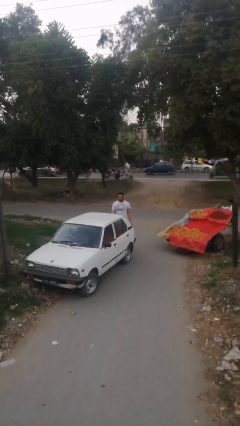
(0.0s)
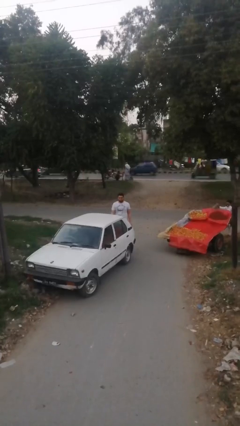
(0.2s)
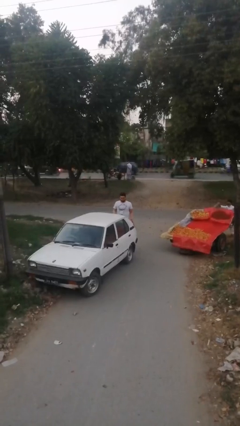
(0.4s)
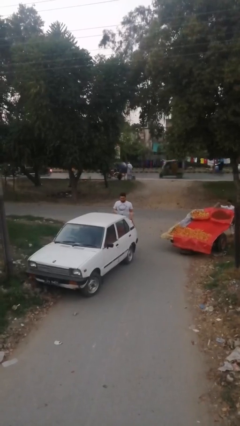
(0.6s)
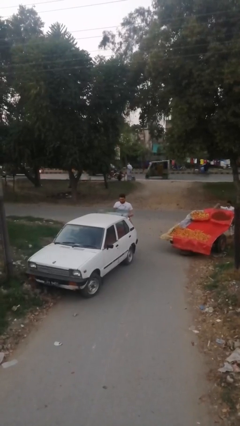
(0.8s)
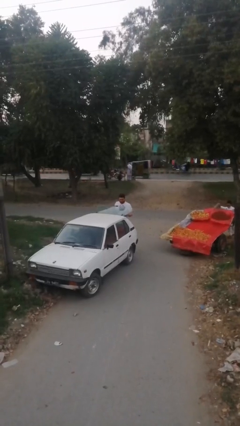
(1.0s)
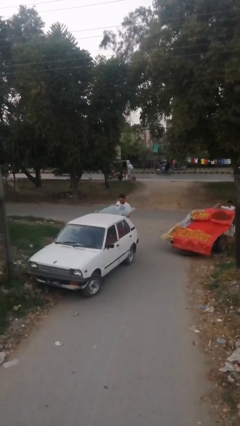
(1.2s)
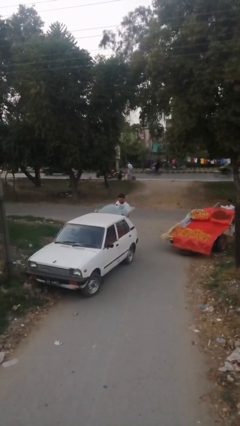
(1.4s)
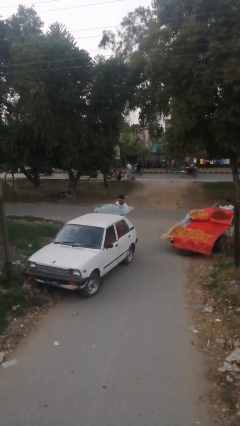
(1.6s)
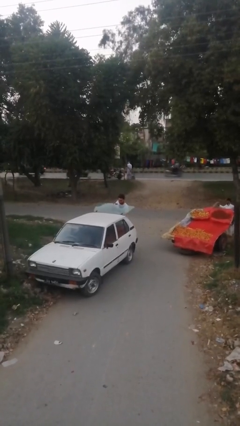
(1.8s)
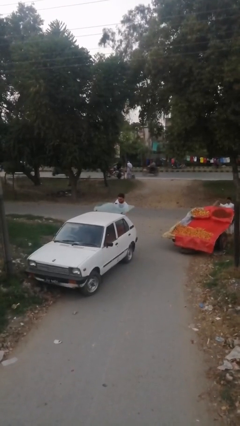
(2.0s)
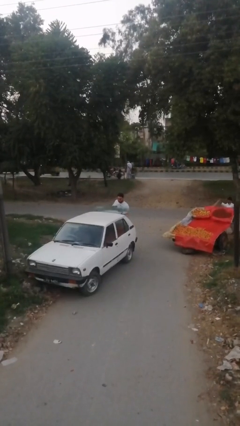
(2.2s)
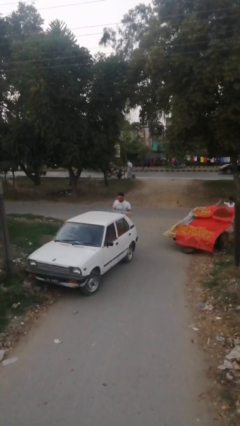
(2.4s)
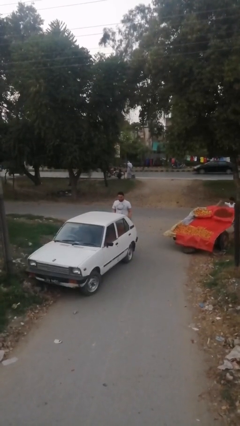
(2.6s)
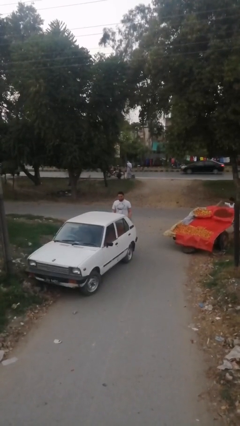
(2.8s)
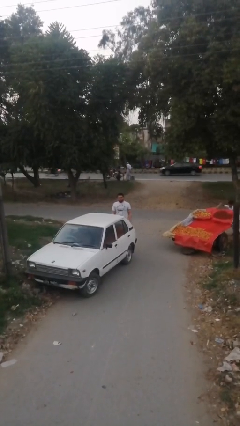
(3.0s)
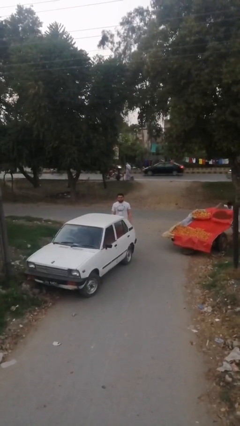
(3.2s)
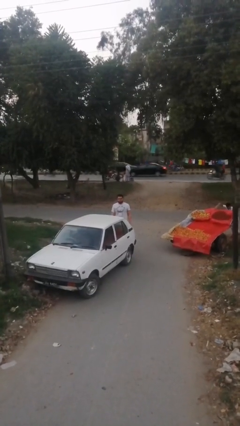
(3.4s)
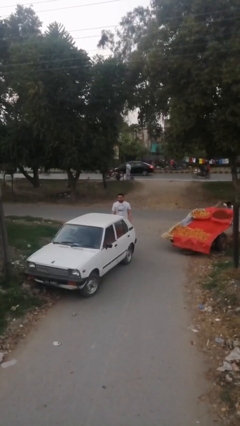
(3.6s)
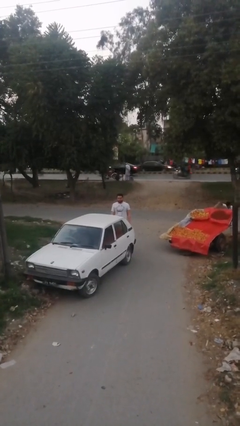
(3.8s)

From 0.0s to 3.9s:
person loads car

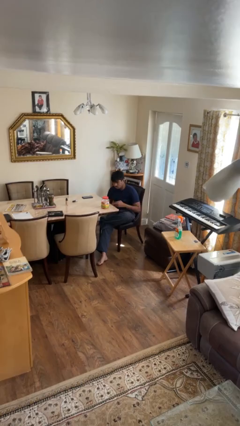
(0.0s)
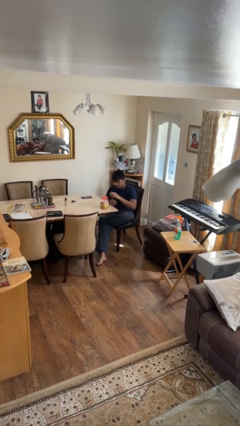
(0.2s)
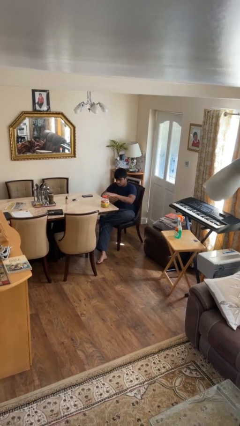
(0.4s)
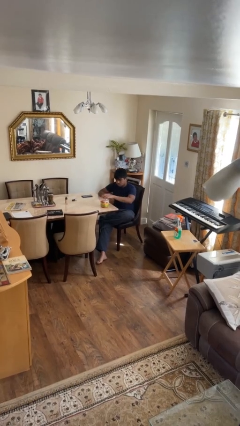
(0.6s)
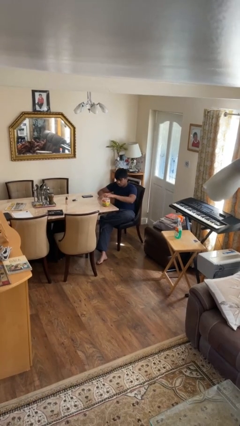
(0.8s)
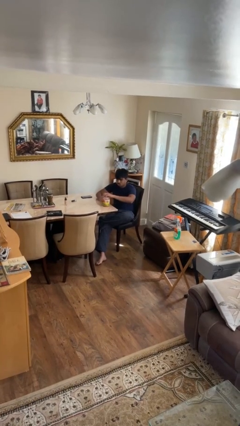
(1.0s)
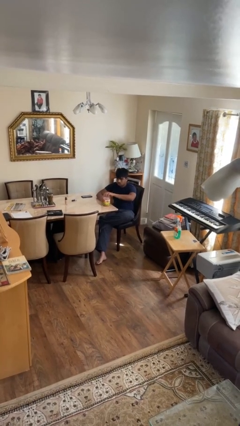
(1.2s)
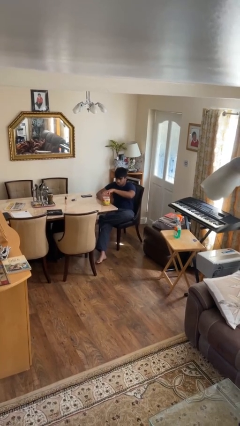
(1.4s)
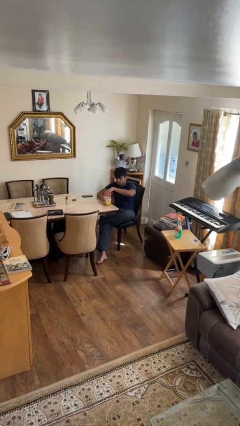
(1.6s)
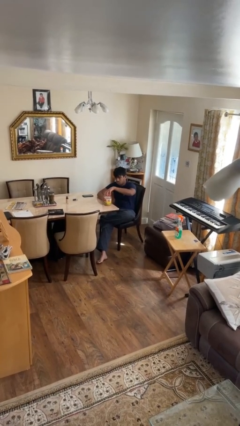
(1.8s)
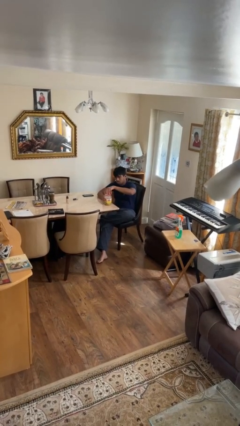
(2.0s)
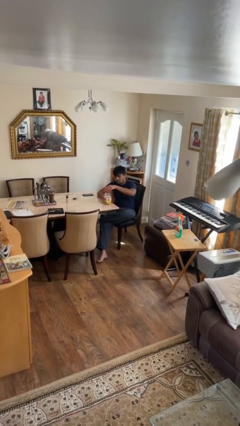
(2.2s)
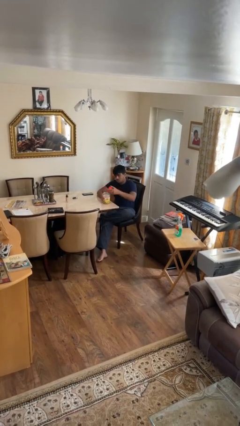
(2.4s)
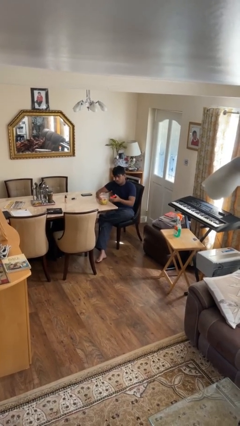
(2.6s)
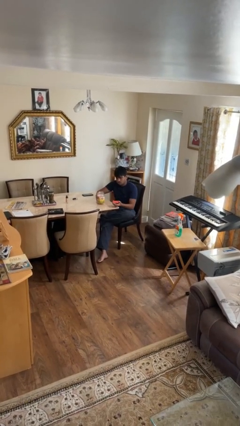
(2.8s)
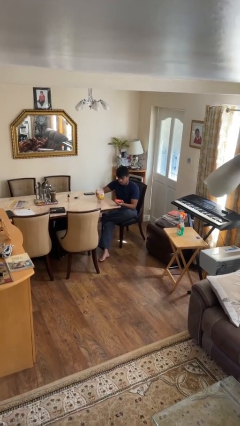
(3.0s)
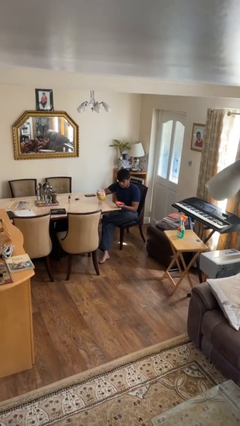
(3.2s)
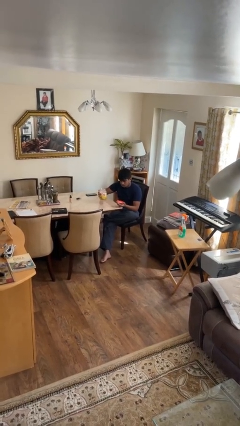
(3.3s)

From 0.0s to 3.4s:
person opens jar

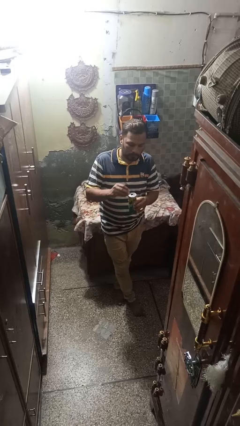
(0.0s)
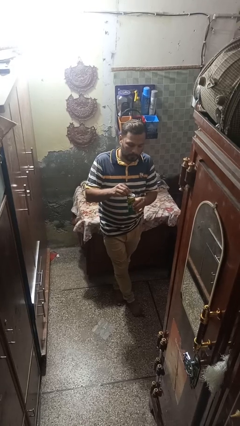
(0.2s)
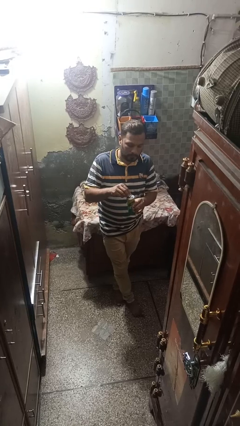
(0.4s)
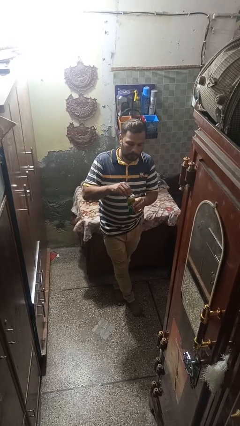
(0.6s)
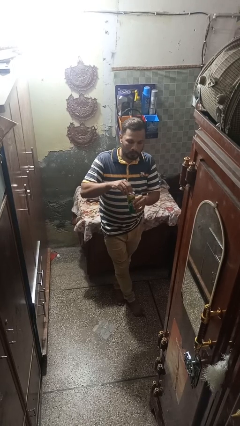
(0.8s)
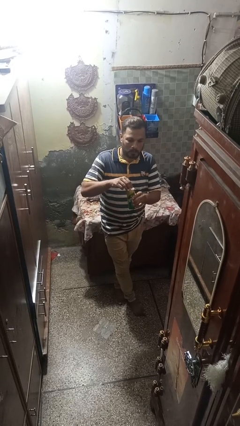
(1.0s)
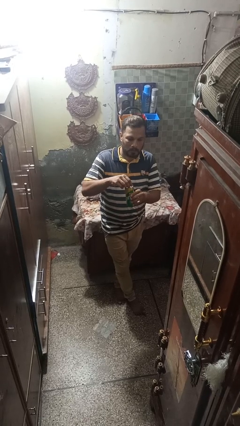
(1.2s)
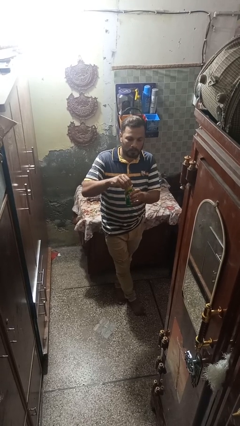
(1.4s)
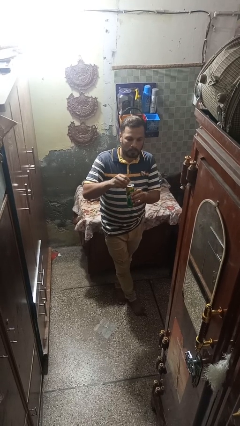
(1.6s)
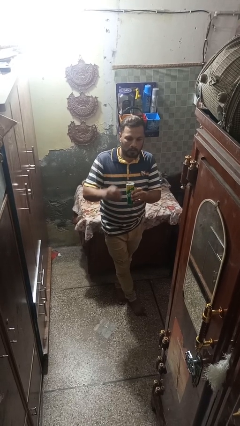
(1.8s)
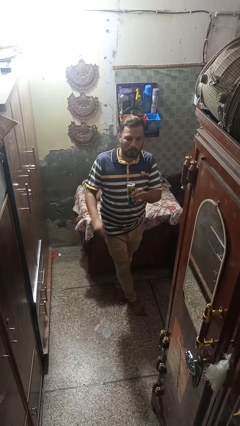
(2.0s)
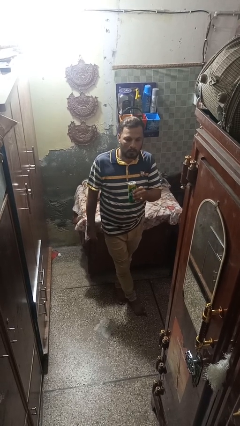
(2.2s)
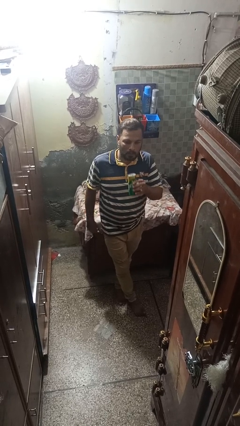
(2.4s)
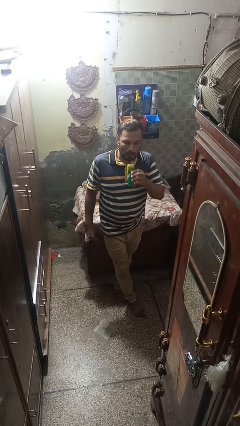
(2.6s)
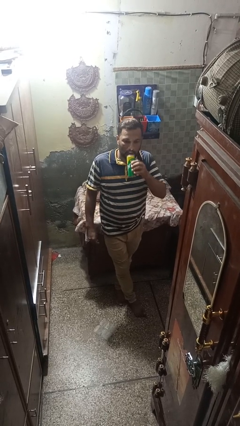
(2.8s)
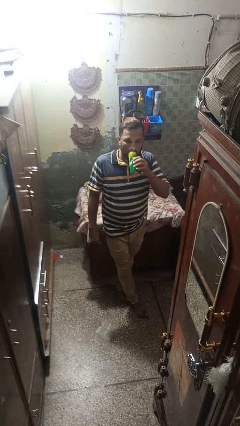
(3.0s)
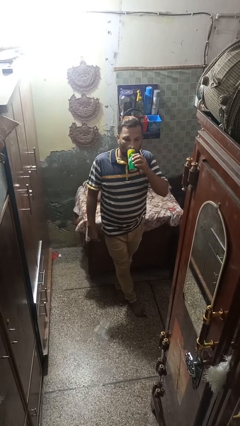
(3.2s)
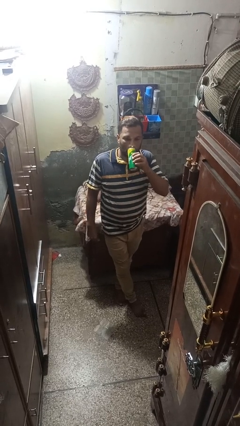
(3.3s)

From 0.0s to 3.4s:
person opens beverage can

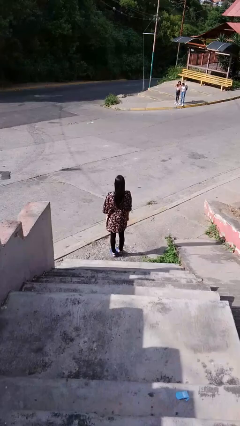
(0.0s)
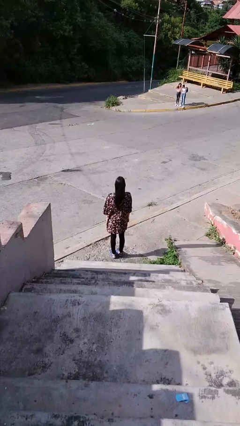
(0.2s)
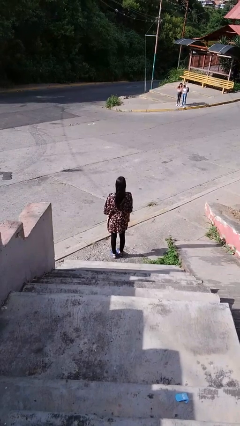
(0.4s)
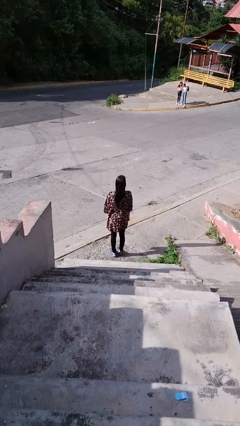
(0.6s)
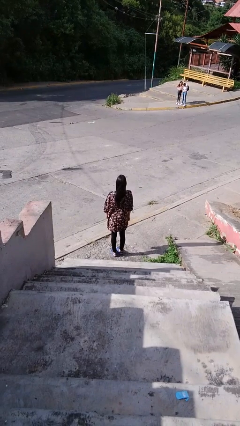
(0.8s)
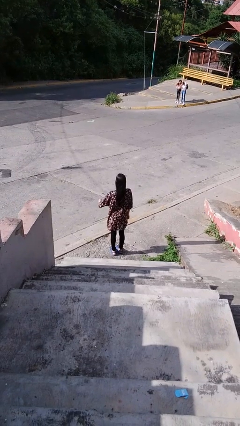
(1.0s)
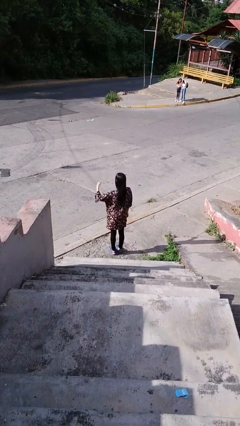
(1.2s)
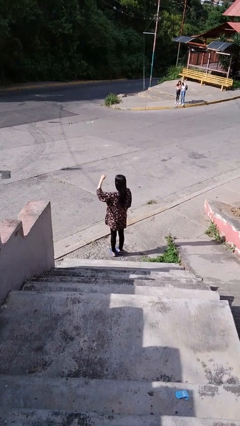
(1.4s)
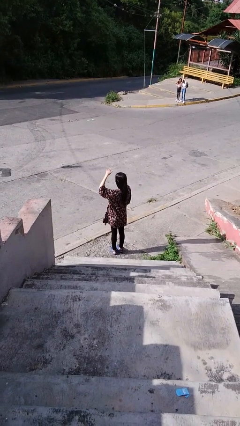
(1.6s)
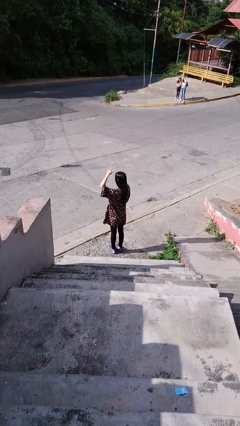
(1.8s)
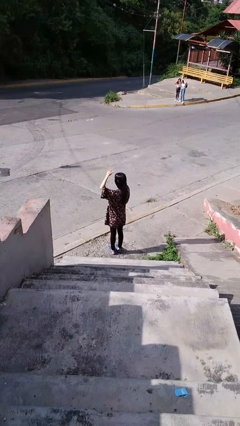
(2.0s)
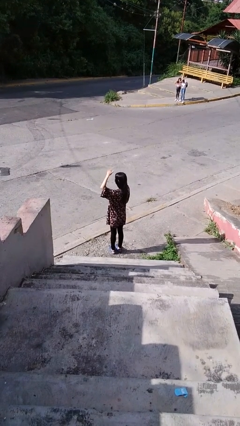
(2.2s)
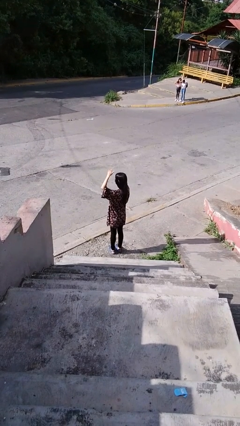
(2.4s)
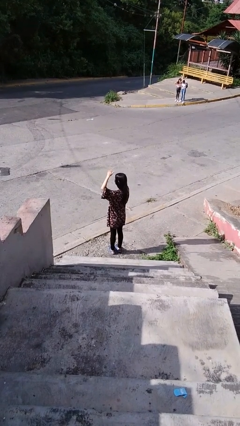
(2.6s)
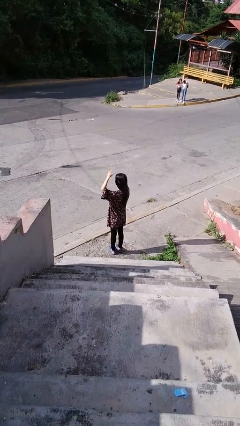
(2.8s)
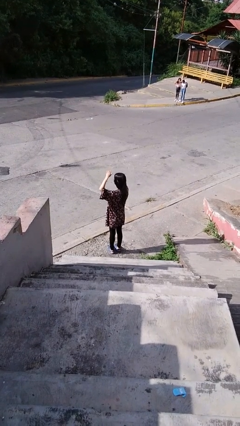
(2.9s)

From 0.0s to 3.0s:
person shades eyes

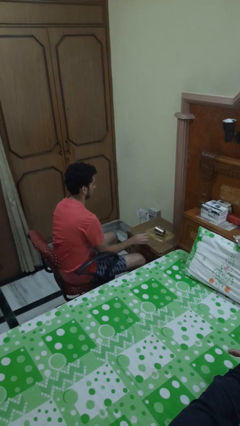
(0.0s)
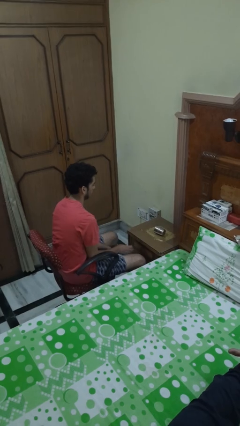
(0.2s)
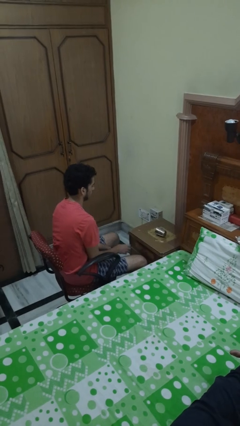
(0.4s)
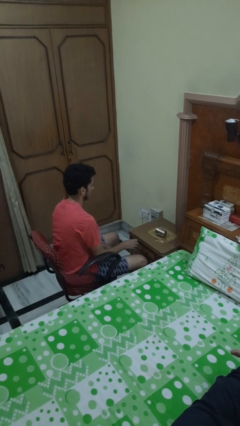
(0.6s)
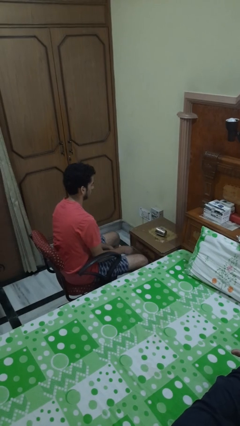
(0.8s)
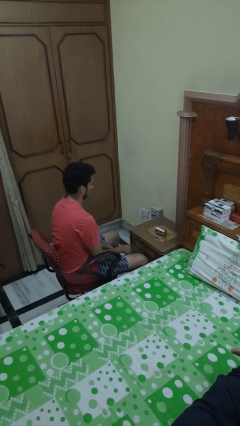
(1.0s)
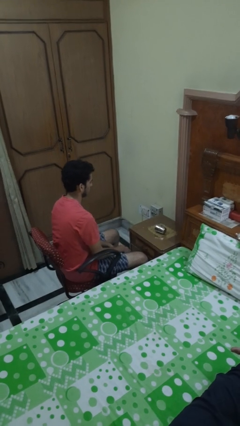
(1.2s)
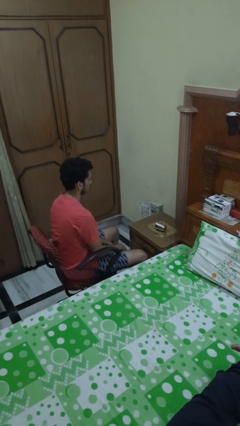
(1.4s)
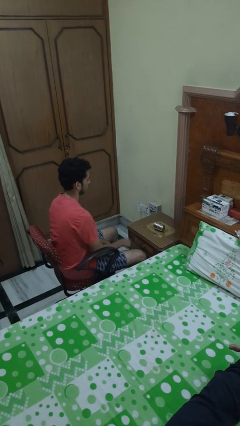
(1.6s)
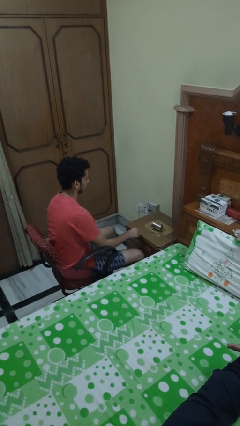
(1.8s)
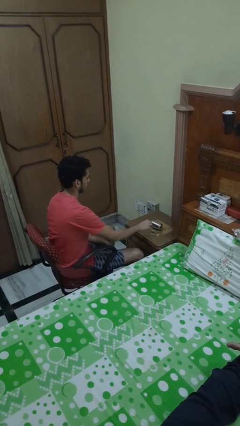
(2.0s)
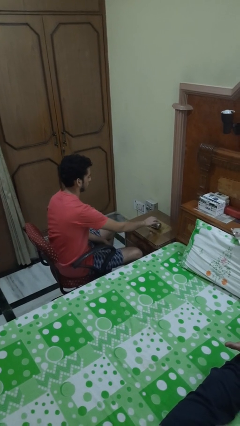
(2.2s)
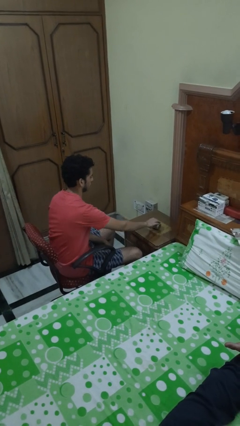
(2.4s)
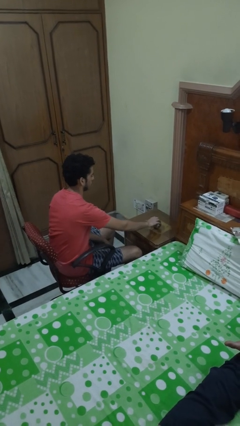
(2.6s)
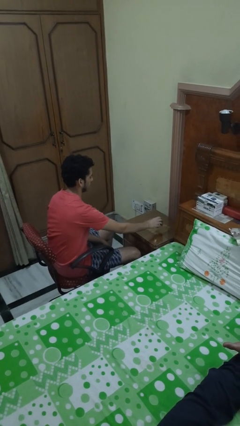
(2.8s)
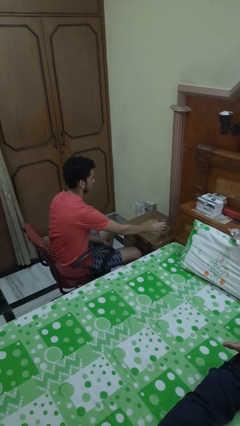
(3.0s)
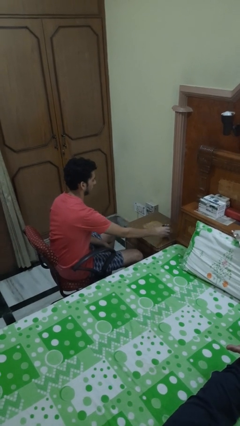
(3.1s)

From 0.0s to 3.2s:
person spills on table

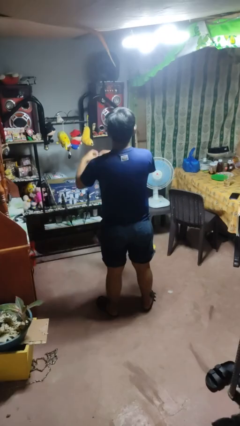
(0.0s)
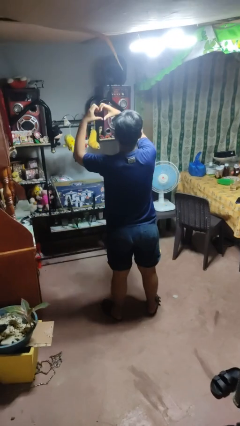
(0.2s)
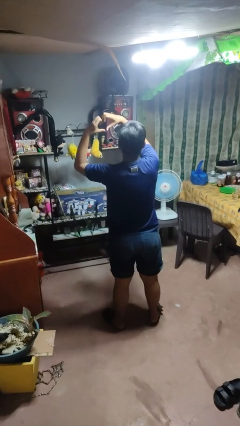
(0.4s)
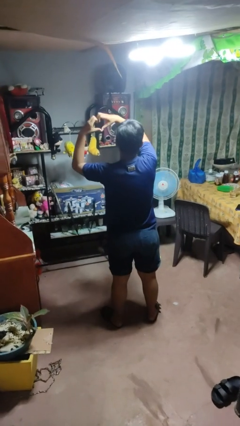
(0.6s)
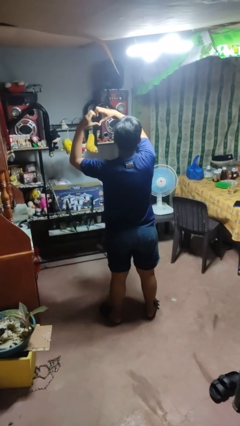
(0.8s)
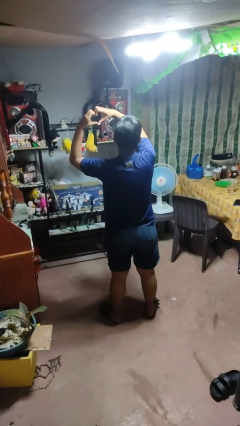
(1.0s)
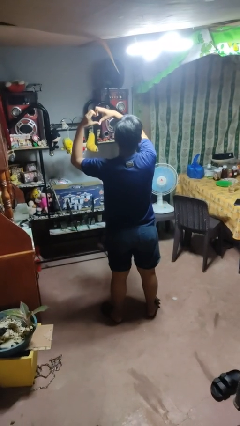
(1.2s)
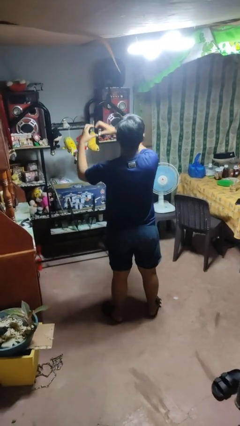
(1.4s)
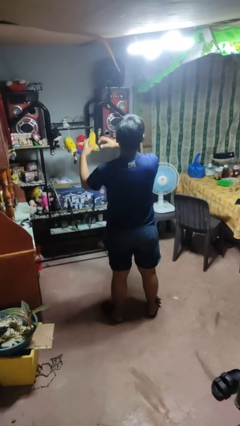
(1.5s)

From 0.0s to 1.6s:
person gestures heart
